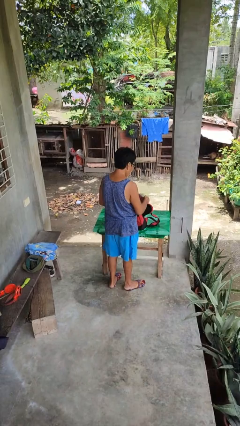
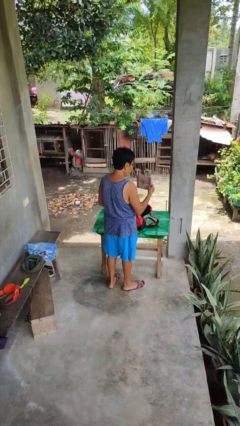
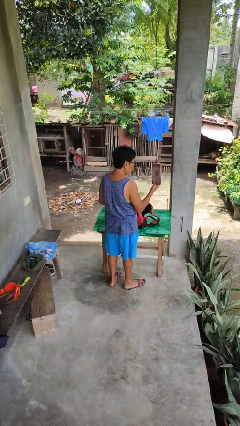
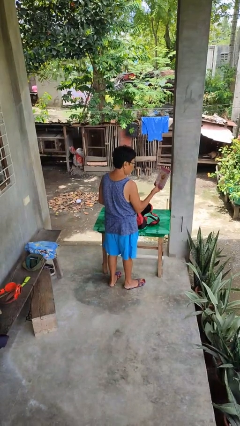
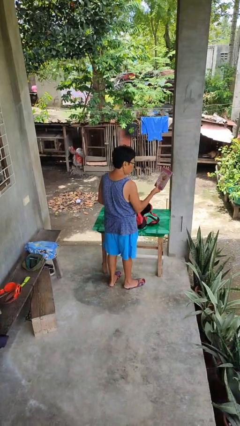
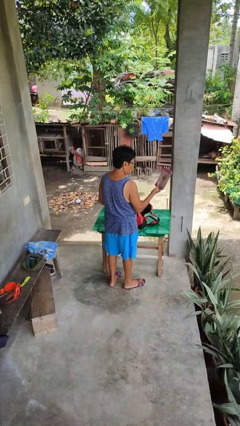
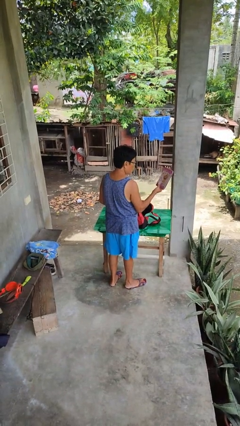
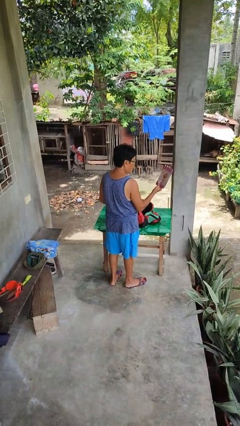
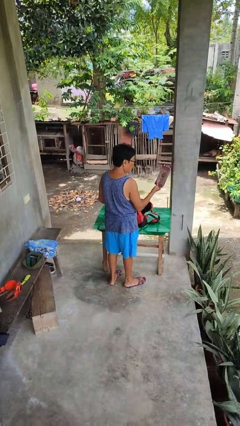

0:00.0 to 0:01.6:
person takes object from backpack

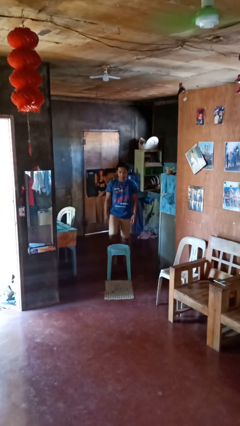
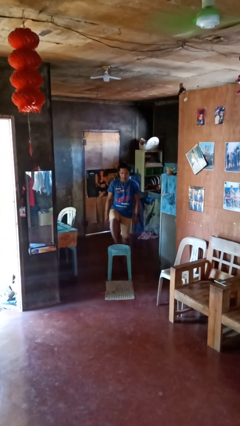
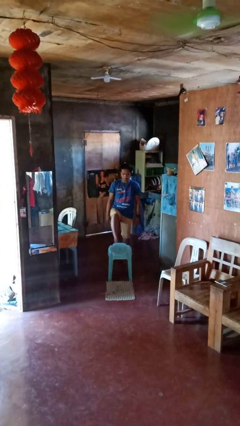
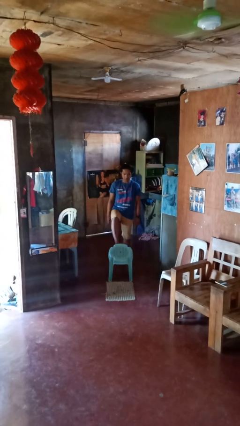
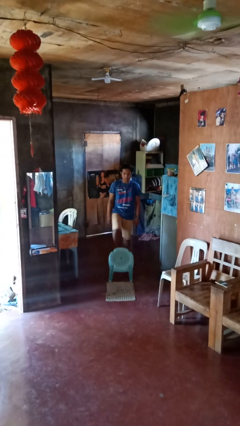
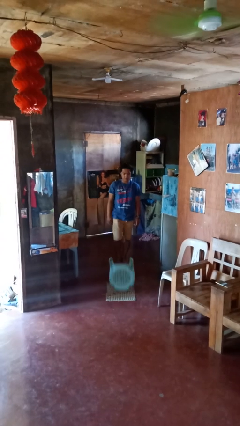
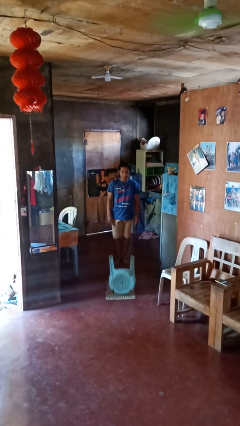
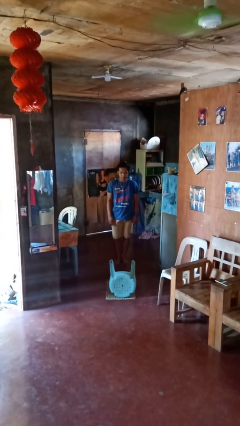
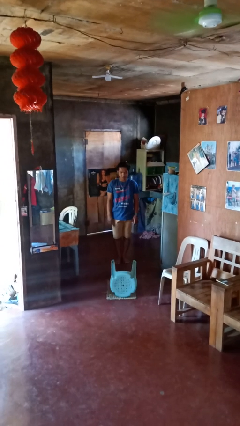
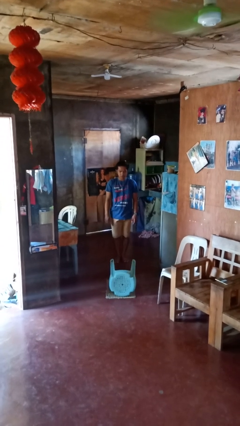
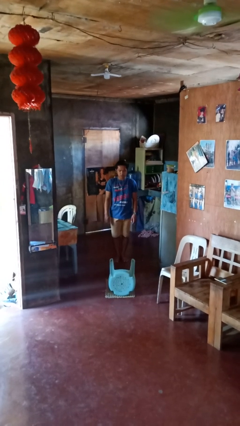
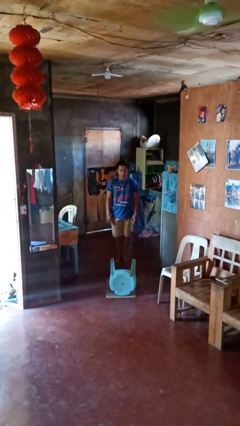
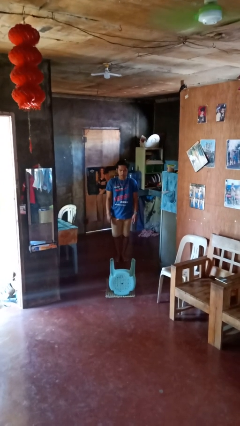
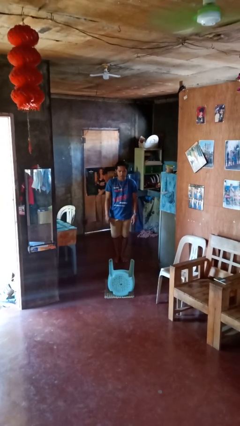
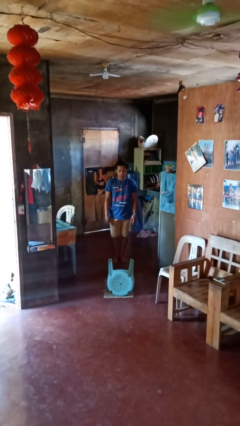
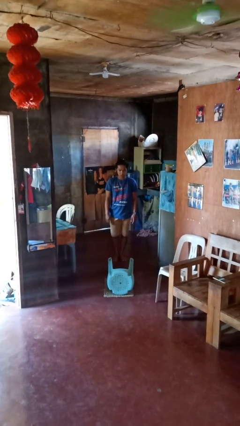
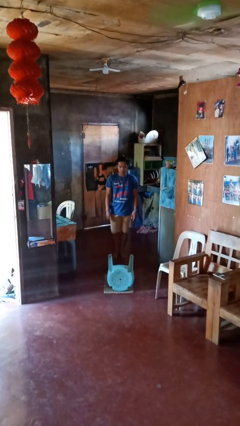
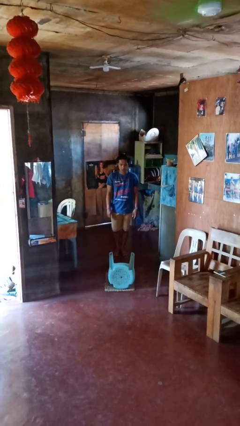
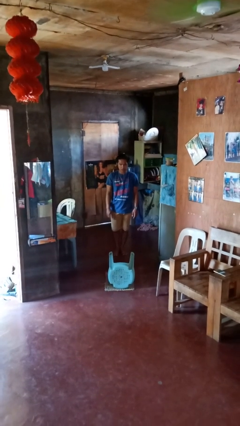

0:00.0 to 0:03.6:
person knocks over furniture

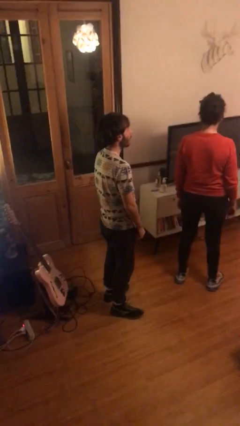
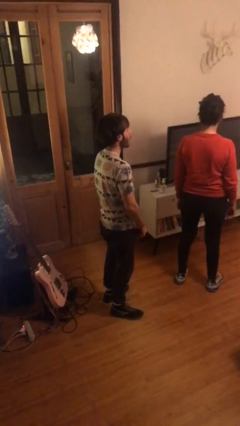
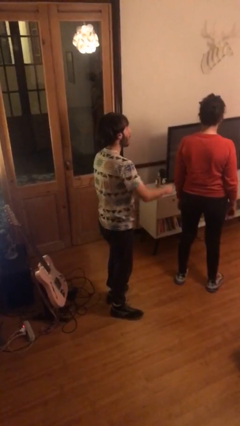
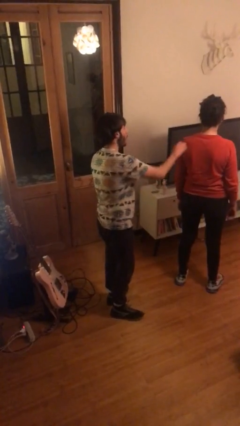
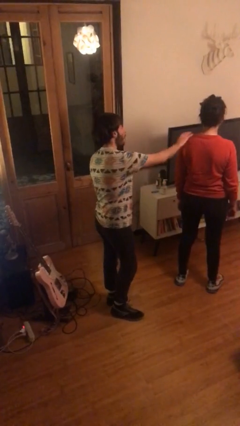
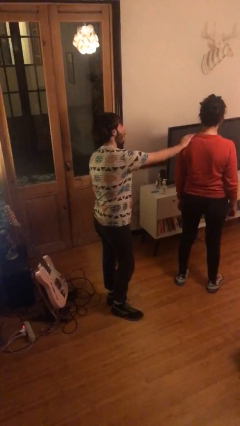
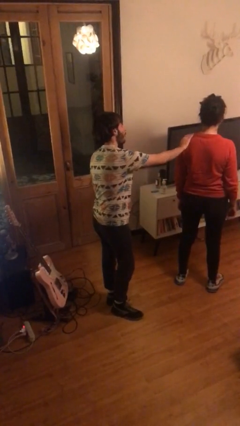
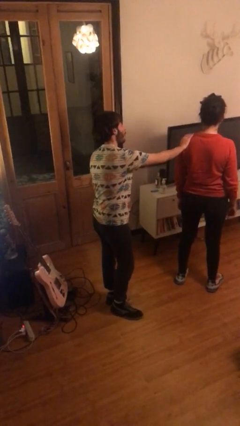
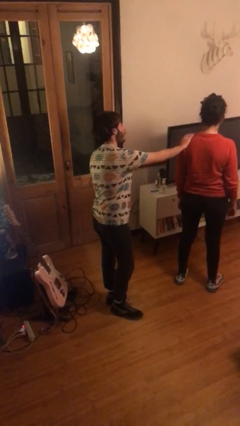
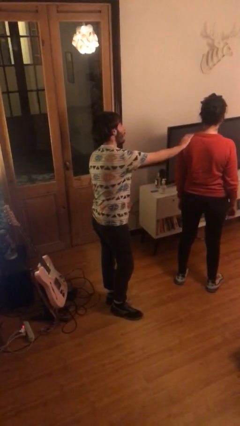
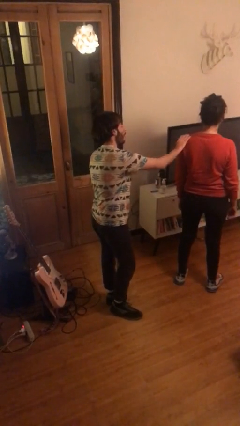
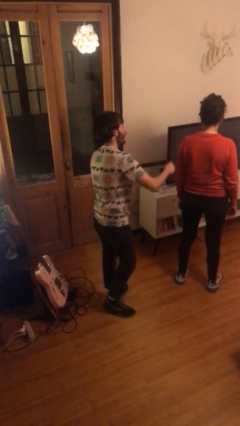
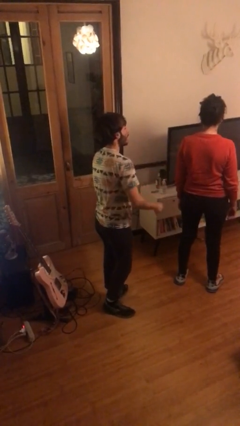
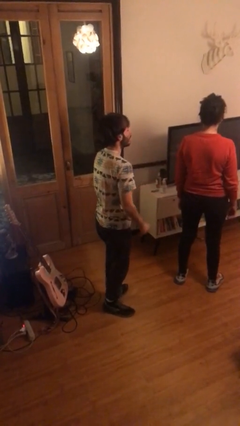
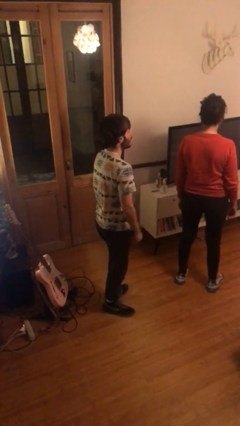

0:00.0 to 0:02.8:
person touches back of person

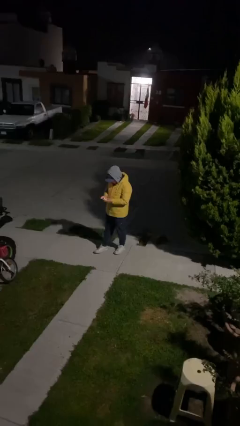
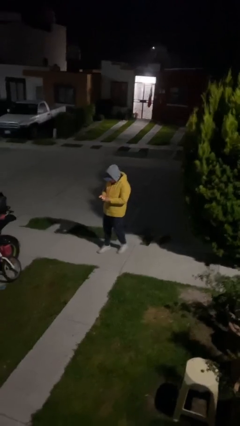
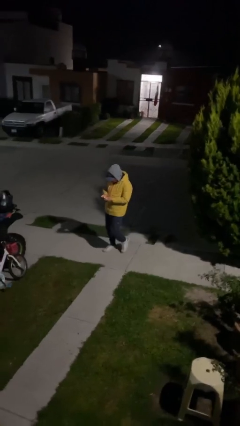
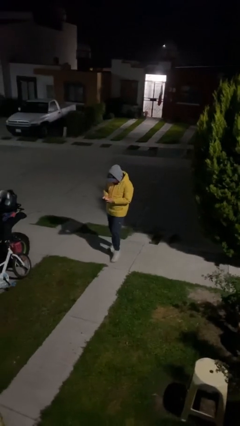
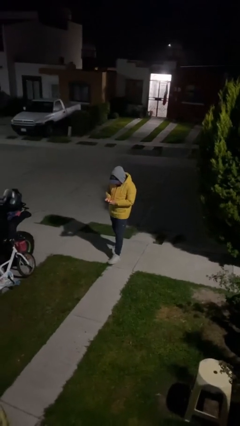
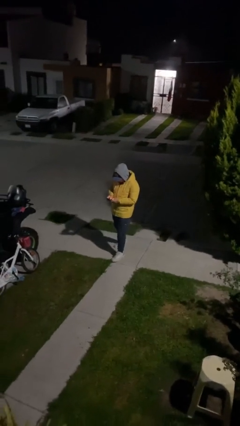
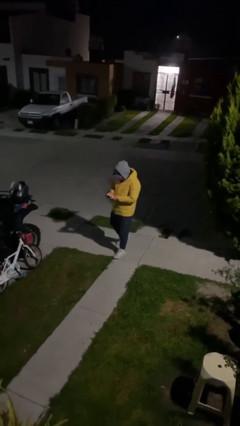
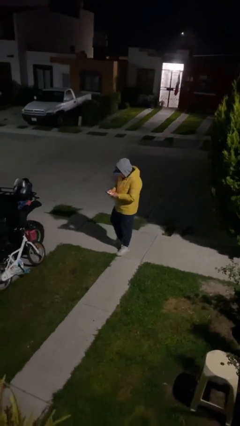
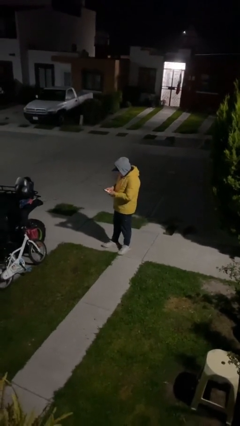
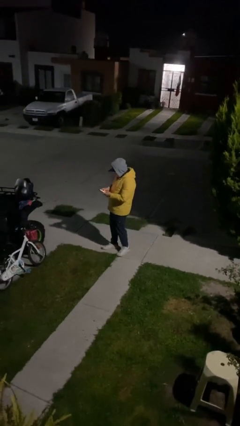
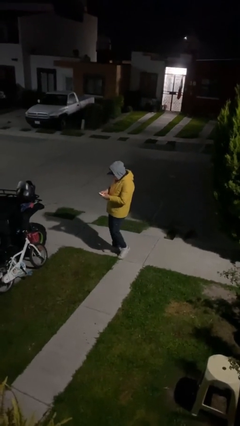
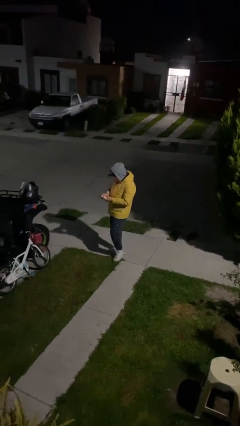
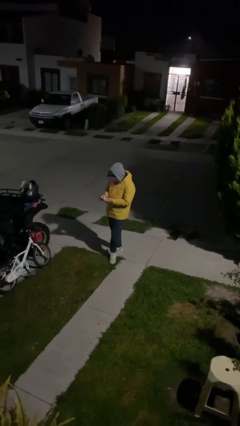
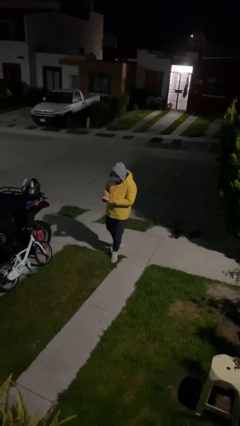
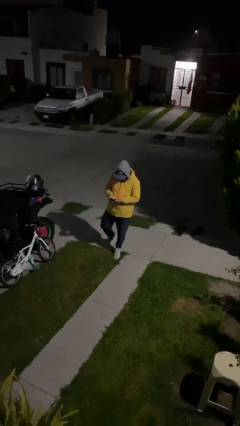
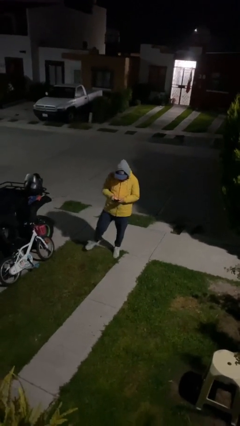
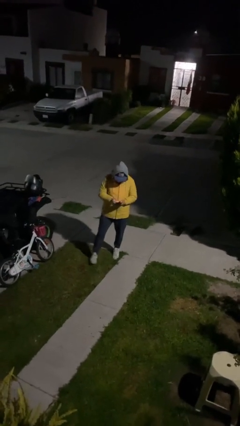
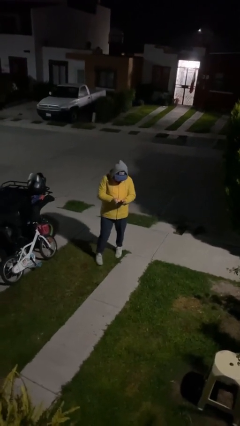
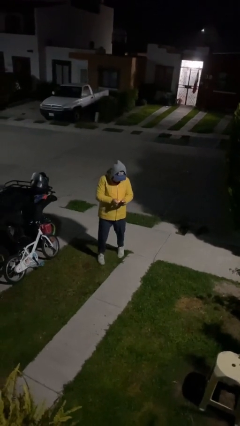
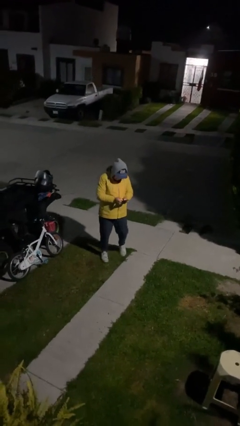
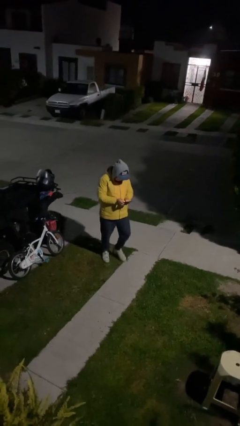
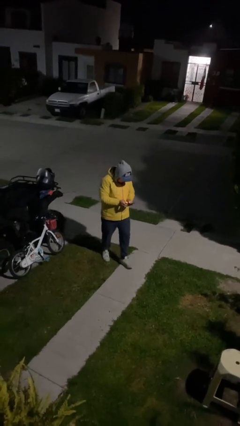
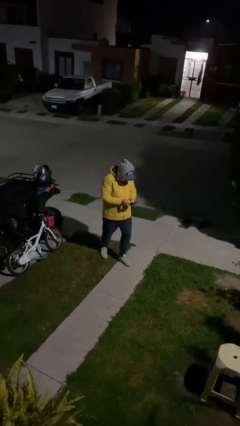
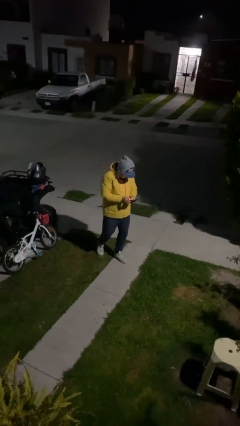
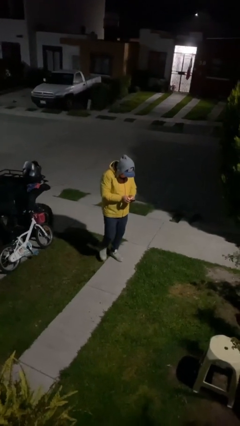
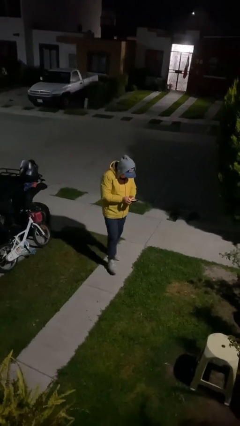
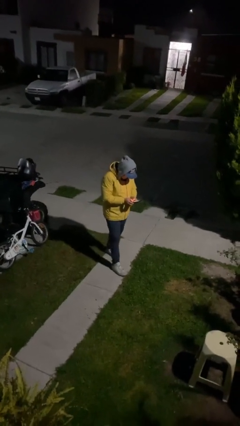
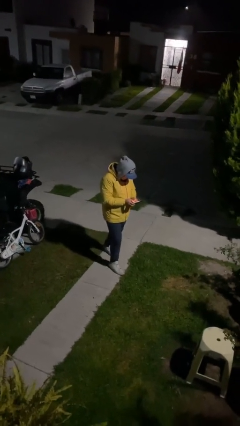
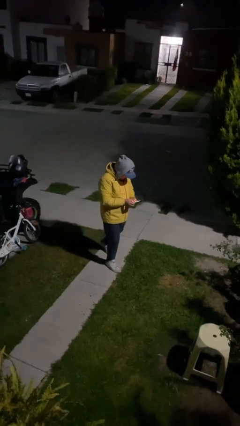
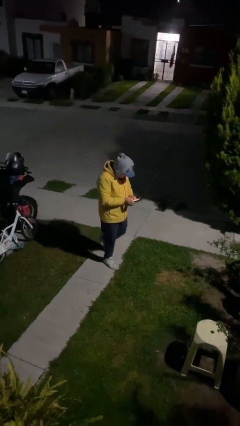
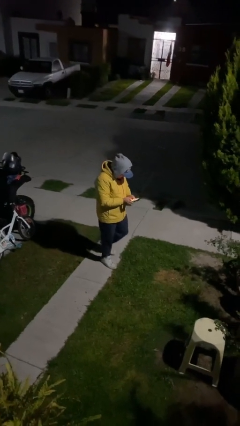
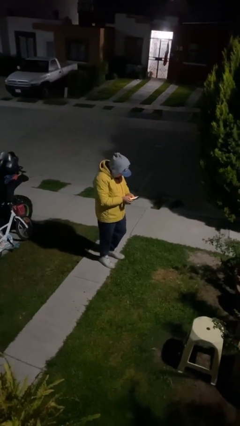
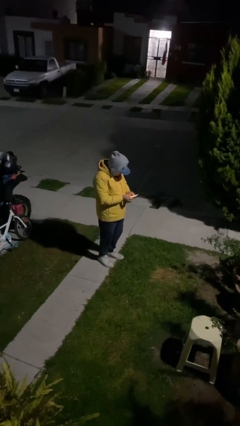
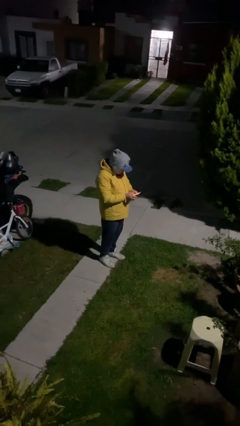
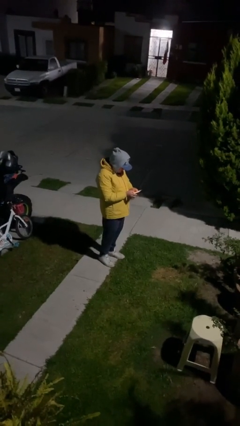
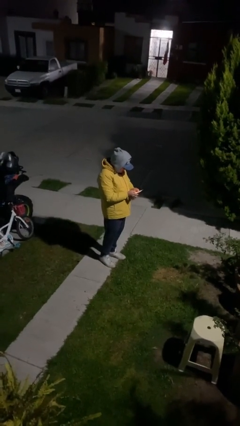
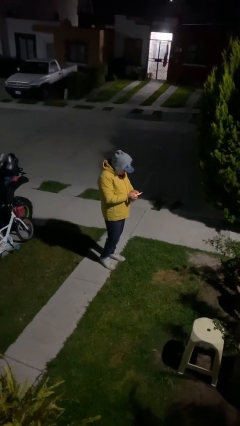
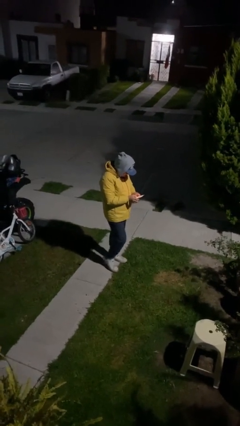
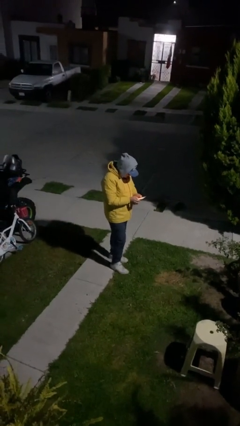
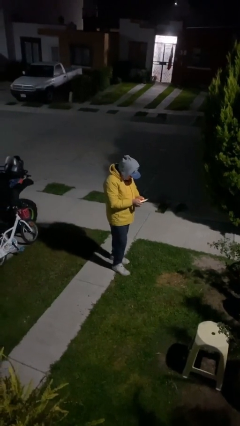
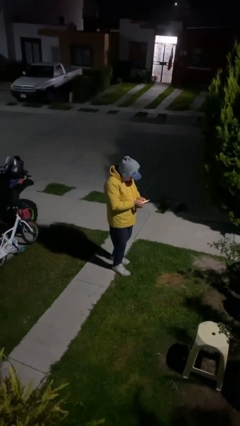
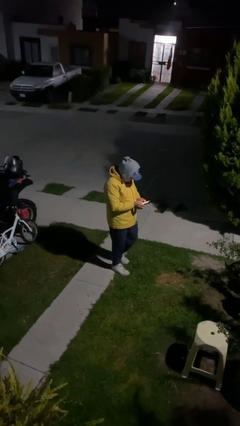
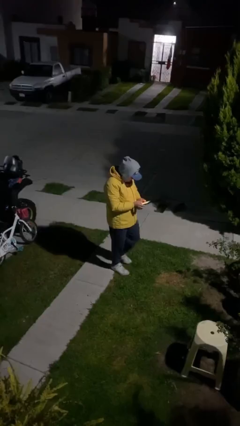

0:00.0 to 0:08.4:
person texts on phone

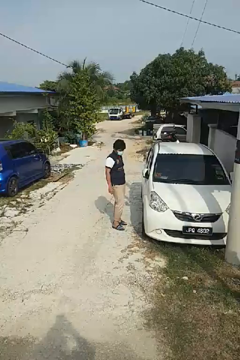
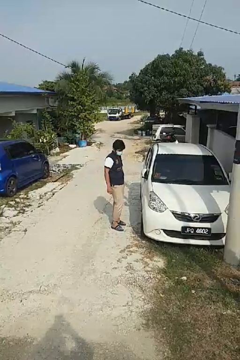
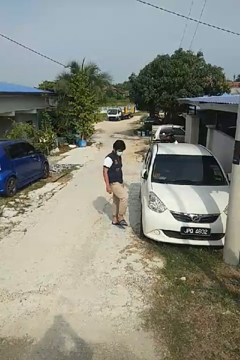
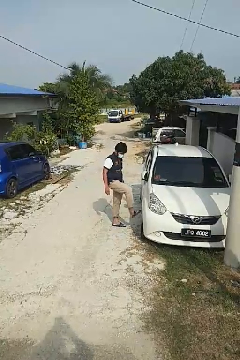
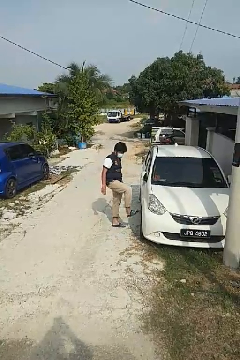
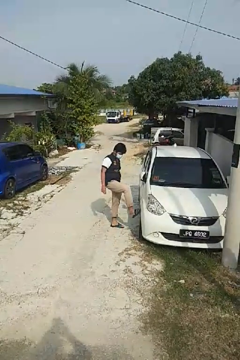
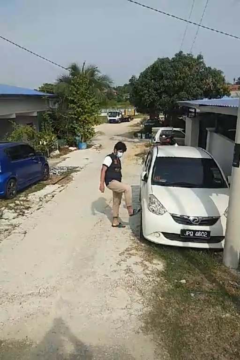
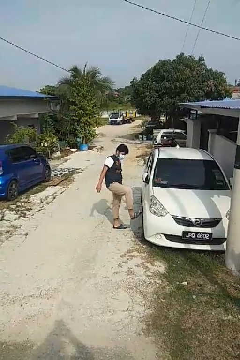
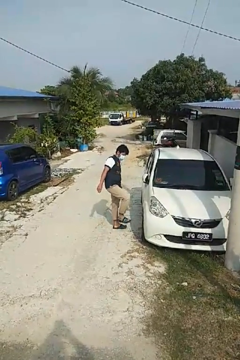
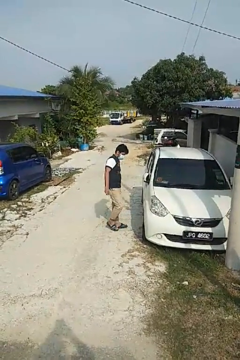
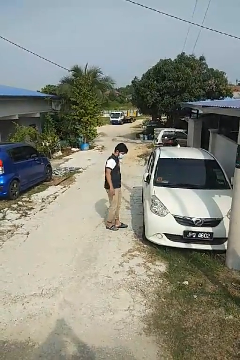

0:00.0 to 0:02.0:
person kicks car tires
